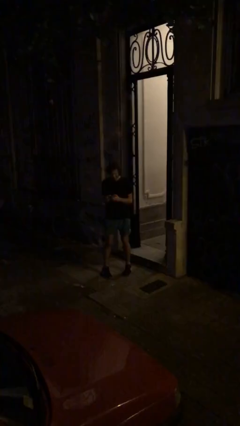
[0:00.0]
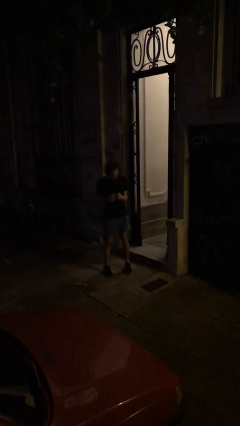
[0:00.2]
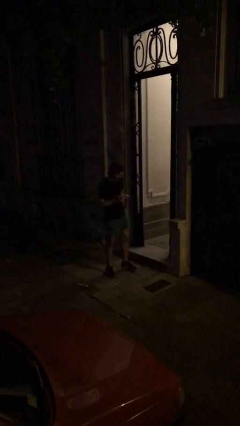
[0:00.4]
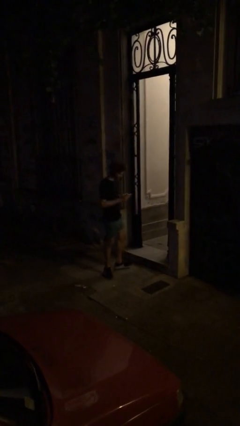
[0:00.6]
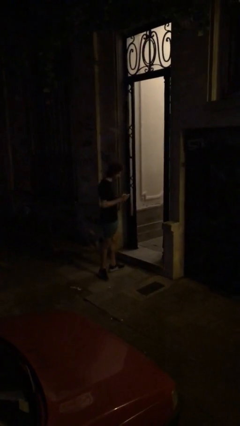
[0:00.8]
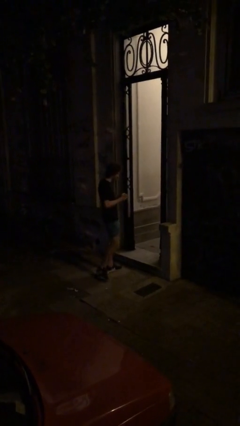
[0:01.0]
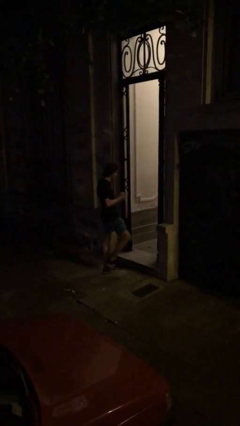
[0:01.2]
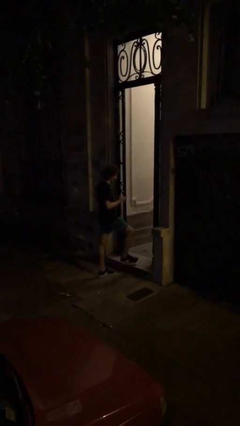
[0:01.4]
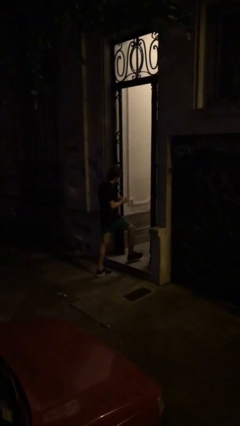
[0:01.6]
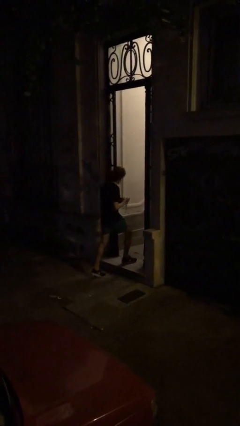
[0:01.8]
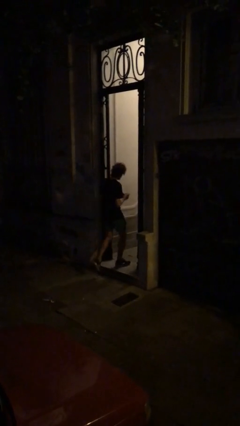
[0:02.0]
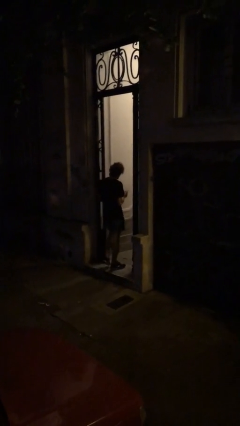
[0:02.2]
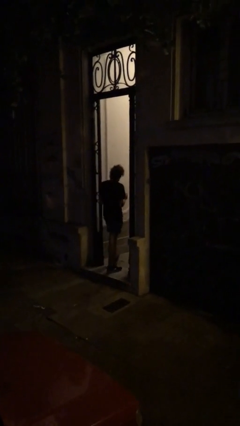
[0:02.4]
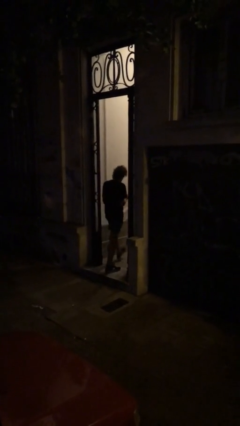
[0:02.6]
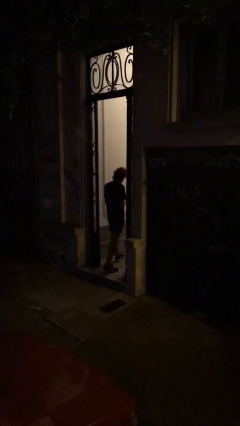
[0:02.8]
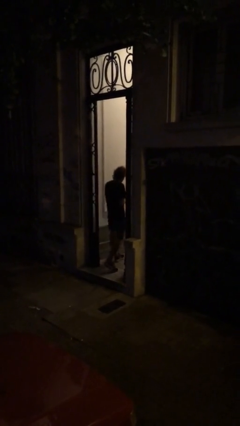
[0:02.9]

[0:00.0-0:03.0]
person exits scene through structure

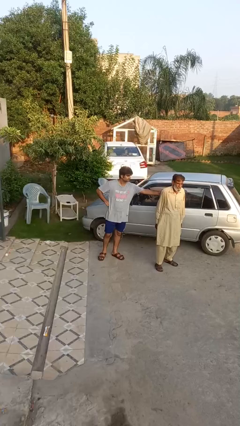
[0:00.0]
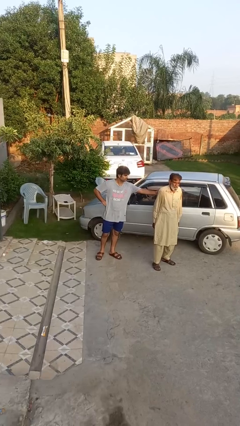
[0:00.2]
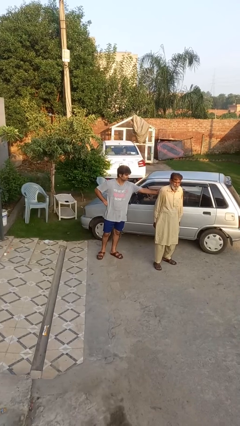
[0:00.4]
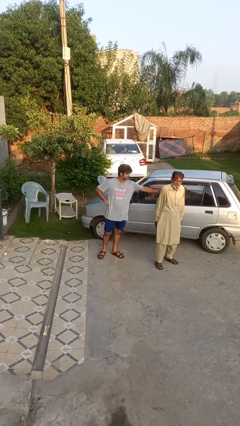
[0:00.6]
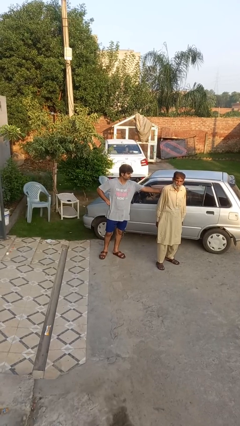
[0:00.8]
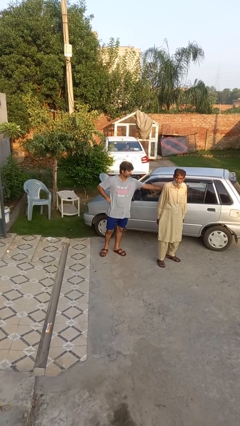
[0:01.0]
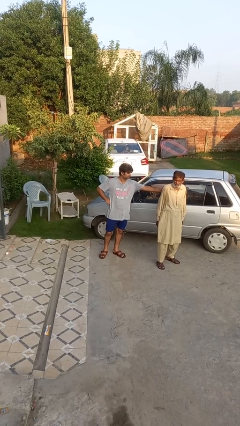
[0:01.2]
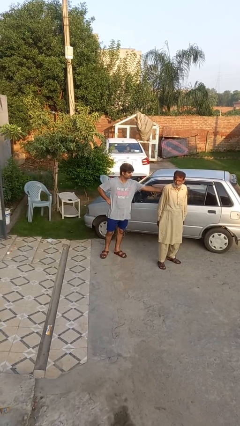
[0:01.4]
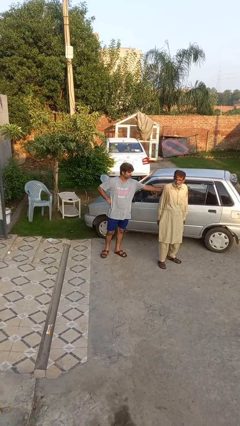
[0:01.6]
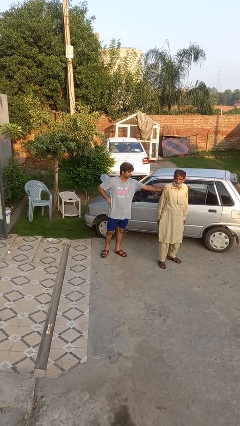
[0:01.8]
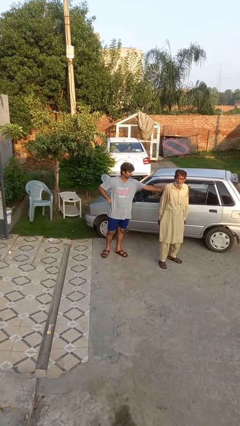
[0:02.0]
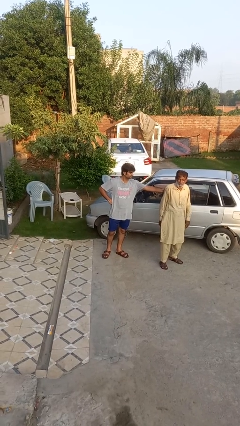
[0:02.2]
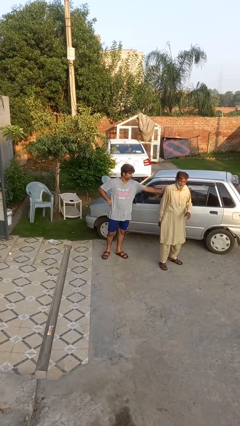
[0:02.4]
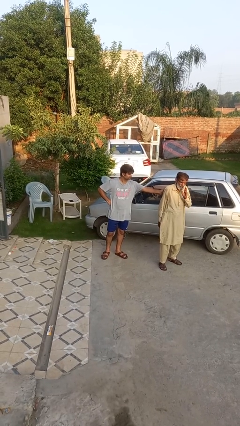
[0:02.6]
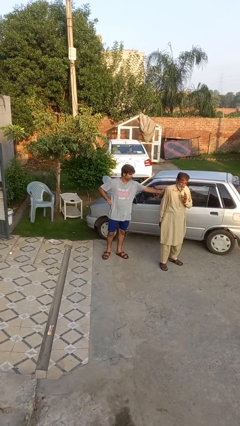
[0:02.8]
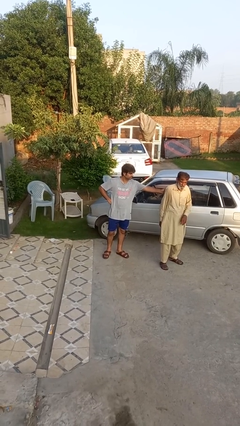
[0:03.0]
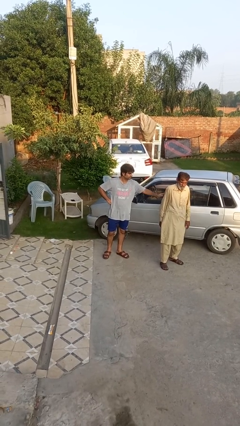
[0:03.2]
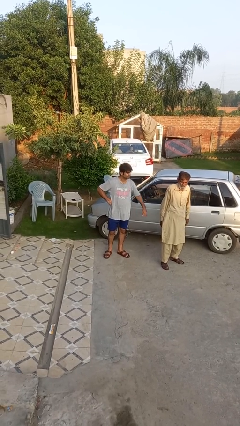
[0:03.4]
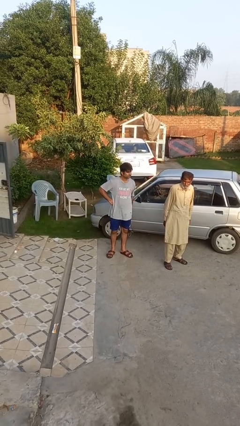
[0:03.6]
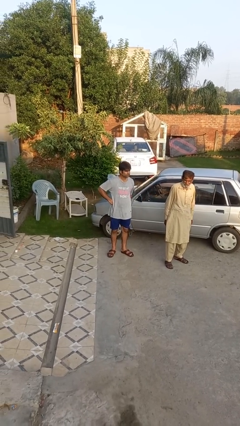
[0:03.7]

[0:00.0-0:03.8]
person touches back of person

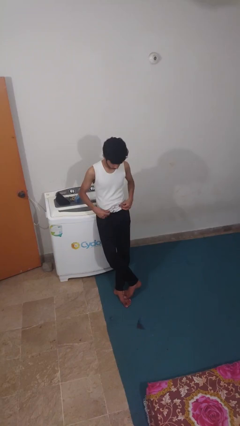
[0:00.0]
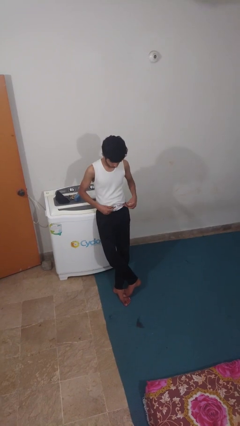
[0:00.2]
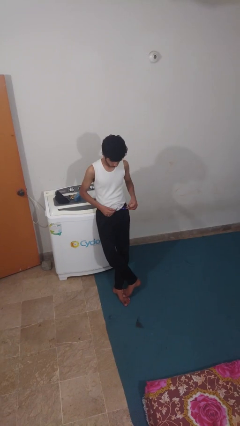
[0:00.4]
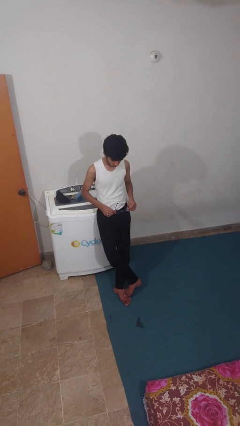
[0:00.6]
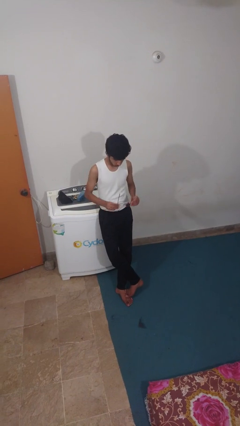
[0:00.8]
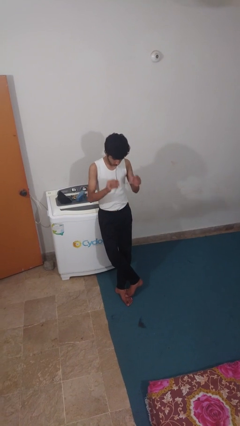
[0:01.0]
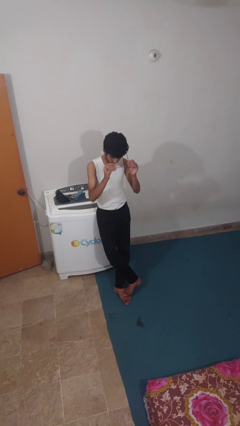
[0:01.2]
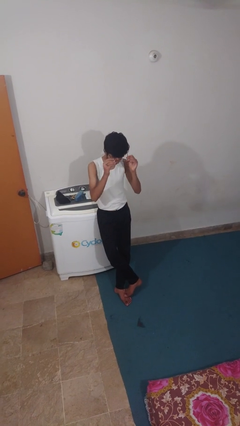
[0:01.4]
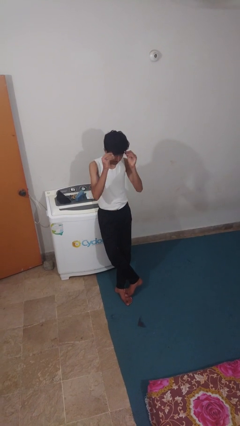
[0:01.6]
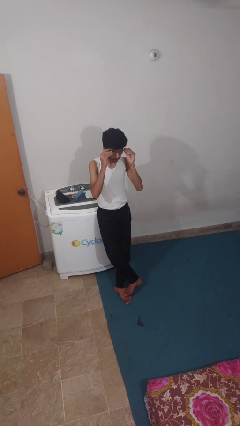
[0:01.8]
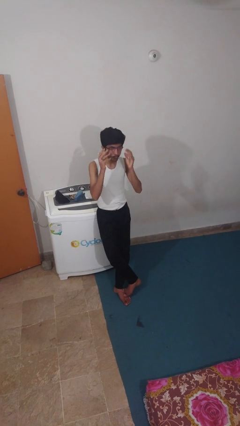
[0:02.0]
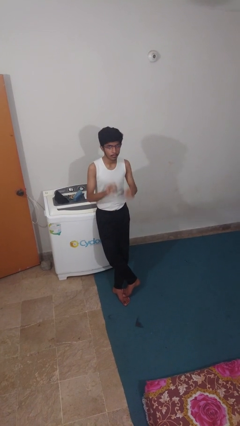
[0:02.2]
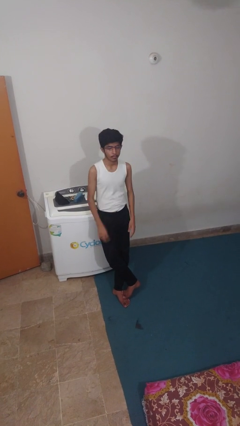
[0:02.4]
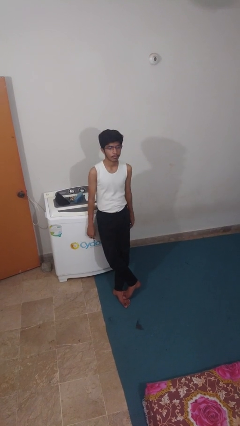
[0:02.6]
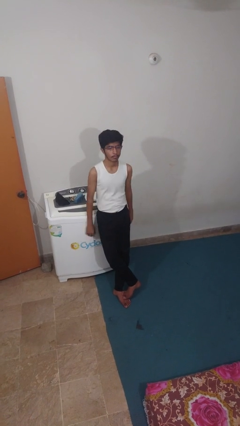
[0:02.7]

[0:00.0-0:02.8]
person puts on glasses

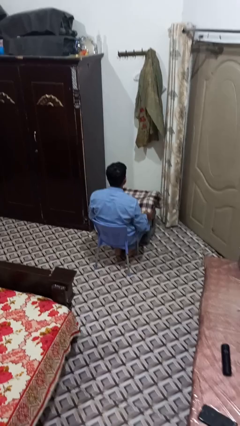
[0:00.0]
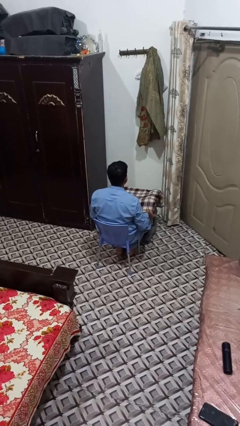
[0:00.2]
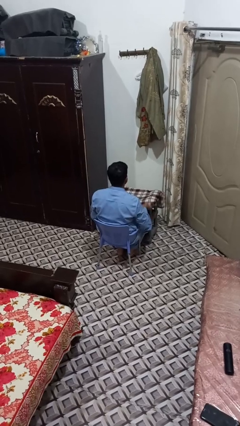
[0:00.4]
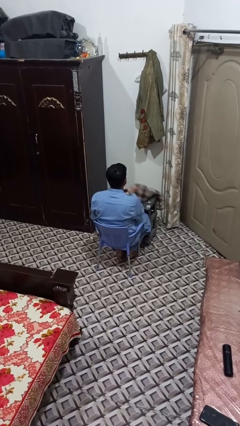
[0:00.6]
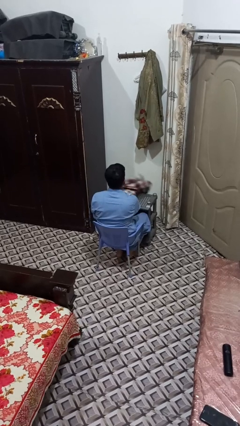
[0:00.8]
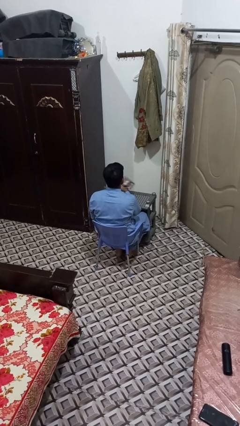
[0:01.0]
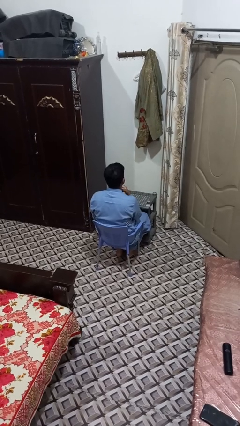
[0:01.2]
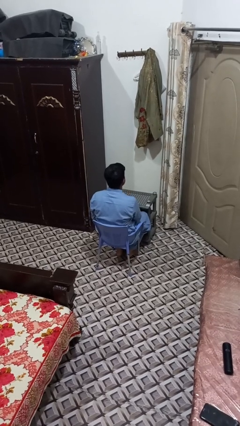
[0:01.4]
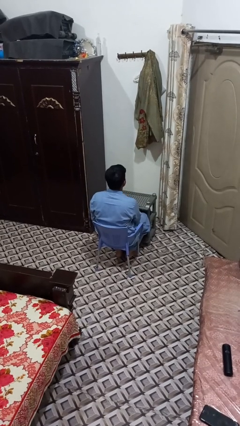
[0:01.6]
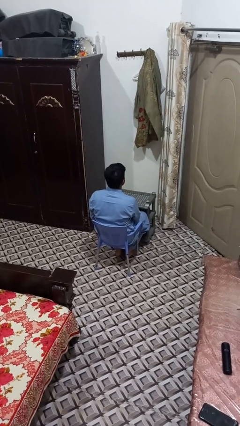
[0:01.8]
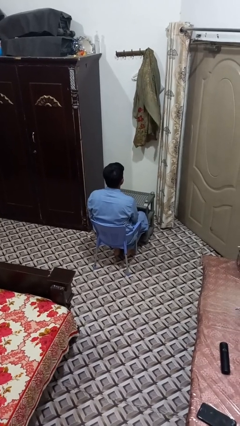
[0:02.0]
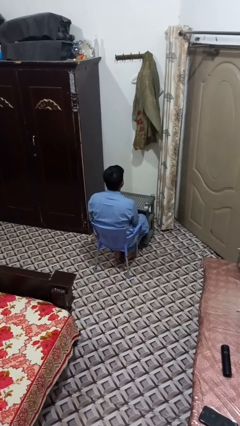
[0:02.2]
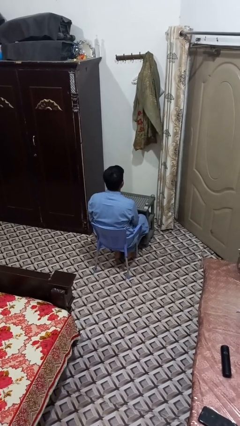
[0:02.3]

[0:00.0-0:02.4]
person folds tablecloth

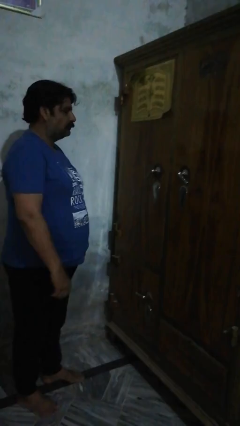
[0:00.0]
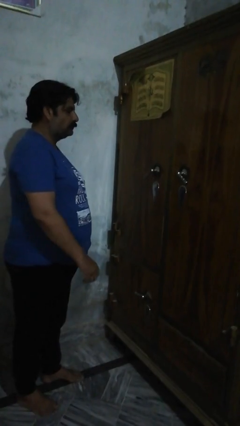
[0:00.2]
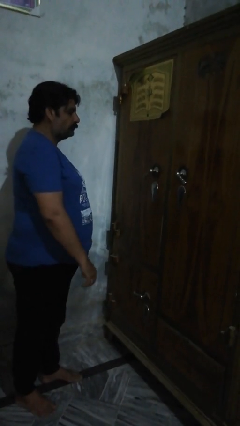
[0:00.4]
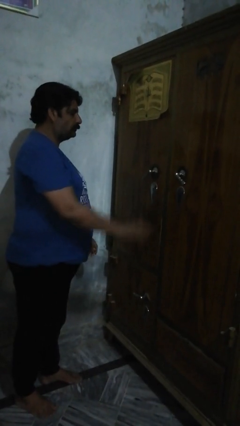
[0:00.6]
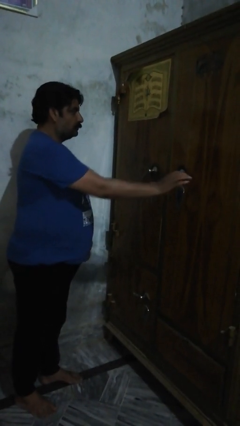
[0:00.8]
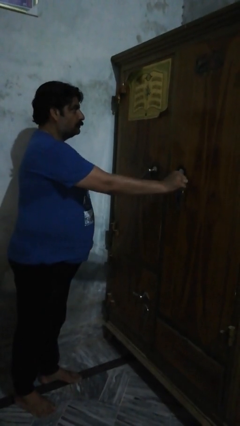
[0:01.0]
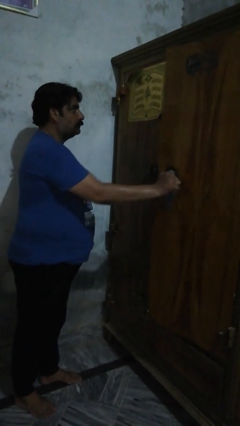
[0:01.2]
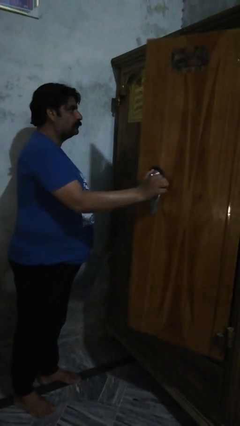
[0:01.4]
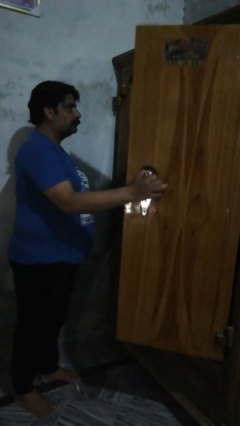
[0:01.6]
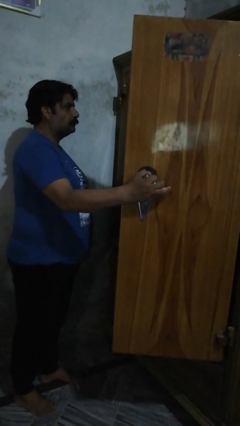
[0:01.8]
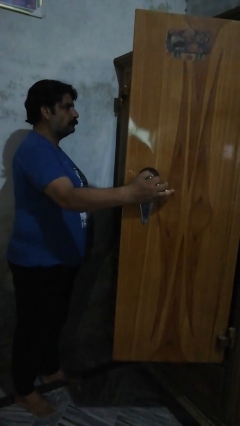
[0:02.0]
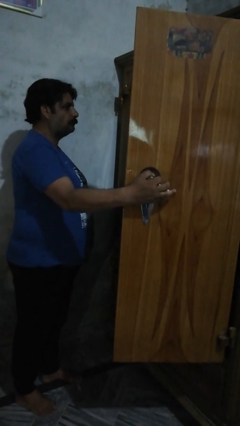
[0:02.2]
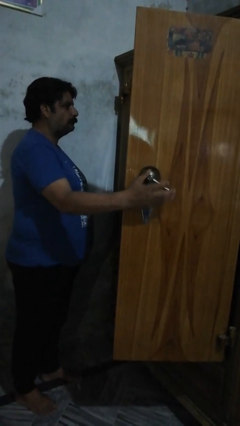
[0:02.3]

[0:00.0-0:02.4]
person opens dresser drawer

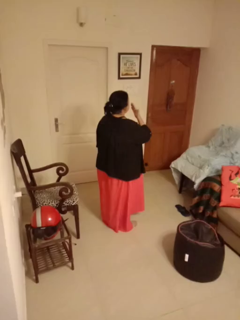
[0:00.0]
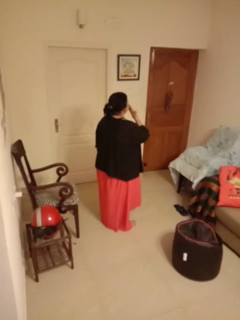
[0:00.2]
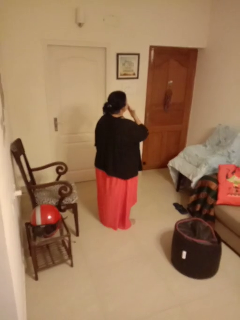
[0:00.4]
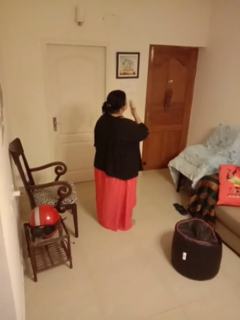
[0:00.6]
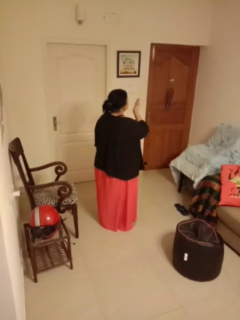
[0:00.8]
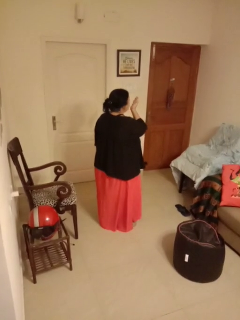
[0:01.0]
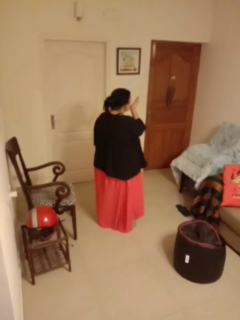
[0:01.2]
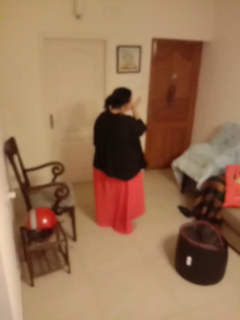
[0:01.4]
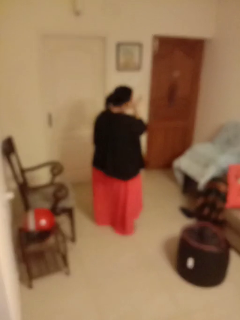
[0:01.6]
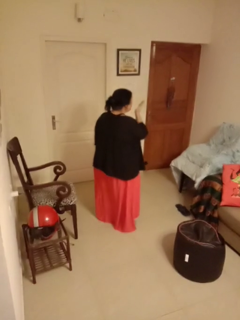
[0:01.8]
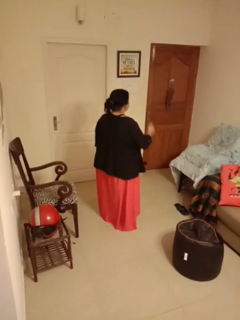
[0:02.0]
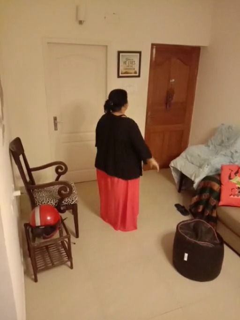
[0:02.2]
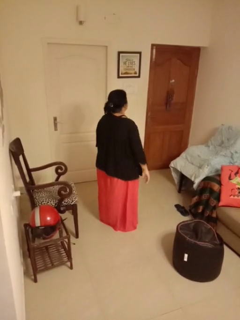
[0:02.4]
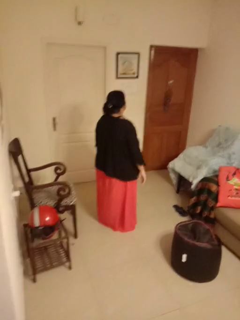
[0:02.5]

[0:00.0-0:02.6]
person gestures blow kiss

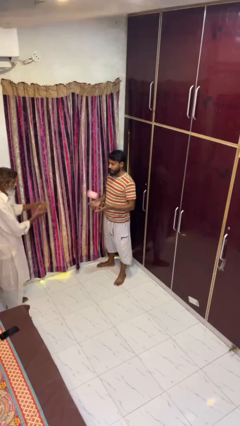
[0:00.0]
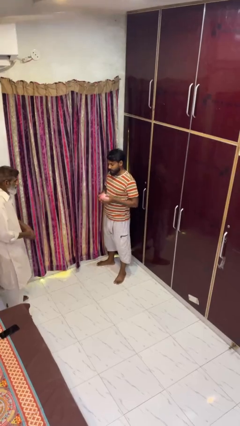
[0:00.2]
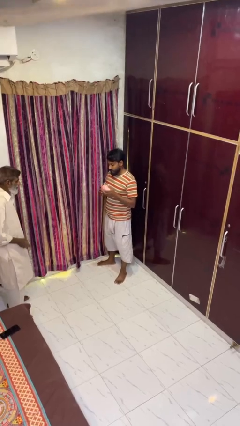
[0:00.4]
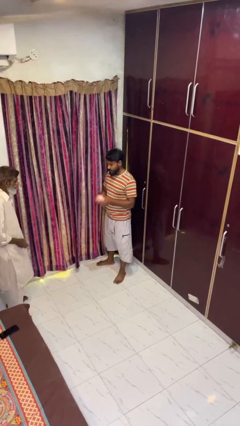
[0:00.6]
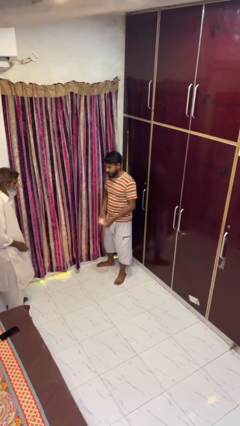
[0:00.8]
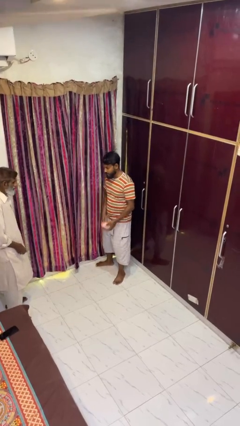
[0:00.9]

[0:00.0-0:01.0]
person catches object from person
